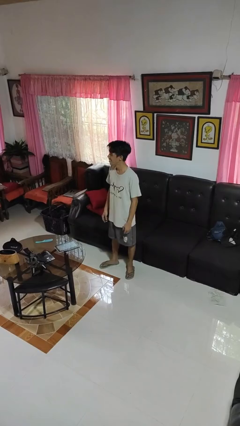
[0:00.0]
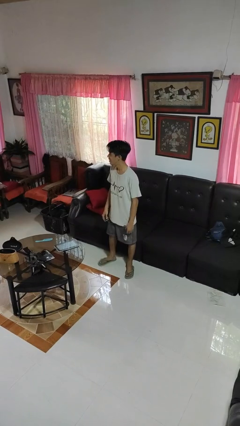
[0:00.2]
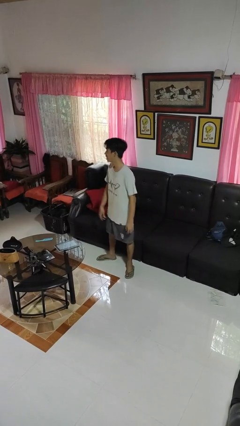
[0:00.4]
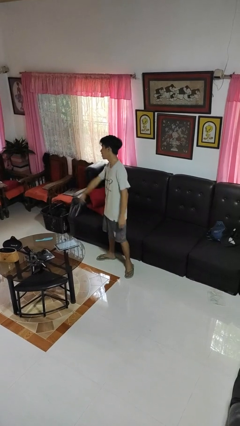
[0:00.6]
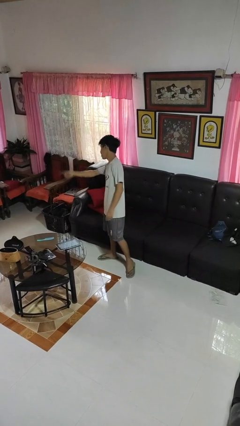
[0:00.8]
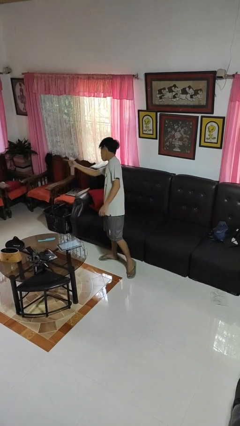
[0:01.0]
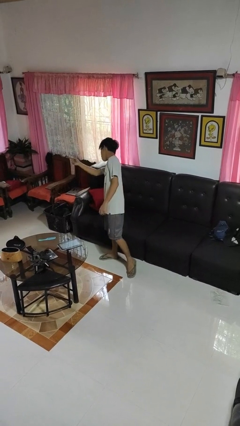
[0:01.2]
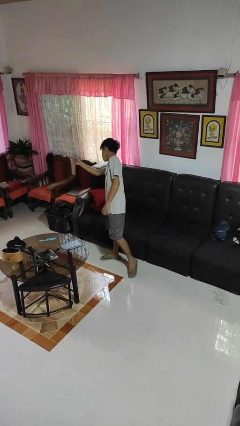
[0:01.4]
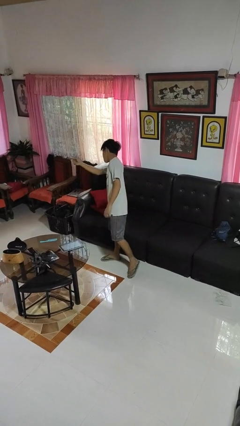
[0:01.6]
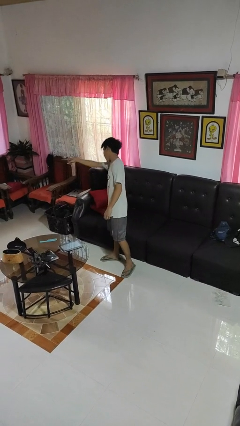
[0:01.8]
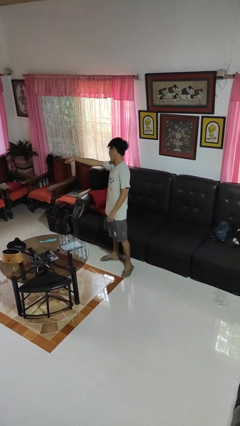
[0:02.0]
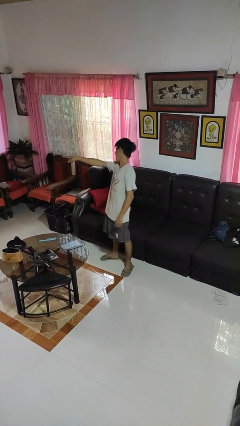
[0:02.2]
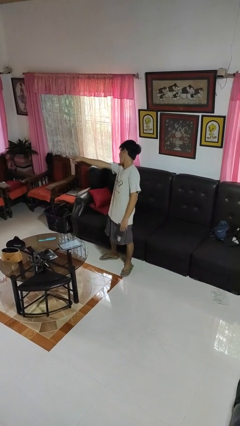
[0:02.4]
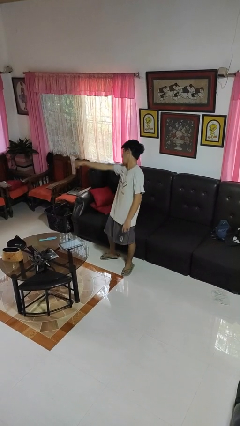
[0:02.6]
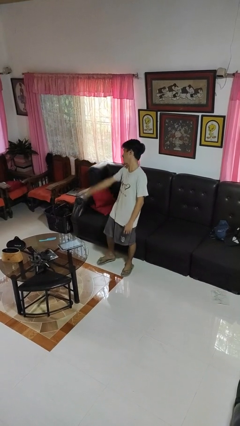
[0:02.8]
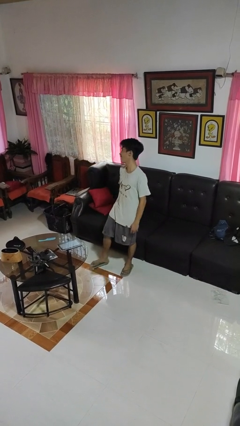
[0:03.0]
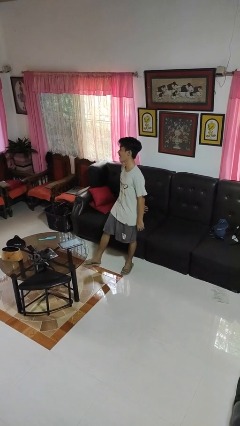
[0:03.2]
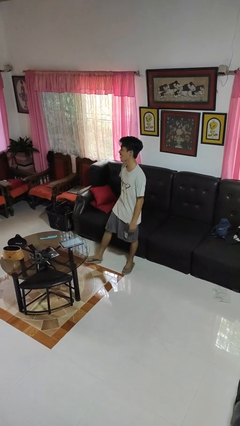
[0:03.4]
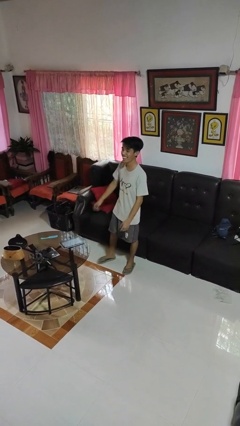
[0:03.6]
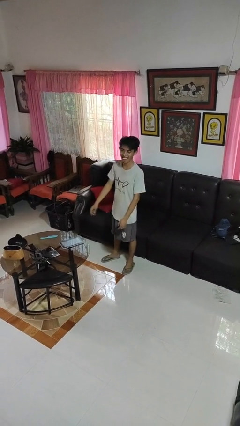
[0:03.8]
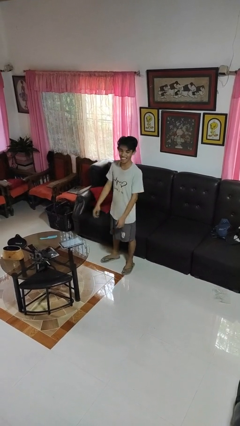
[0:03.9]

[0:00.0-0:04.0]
person points at person

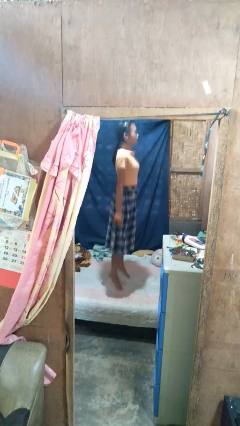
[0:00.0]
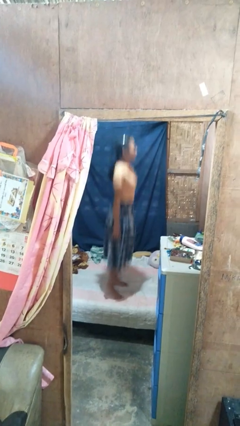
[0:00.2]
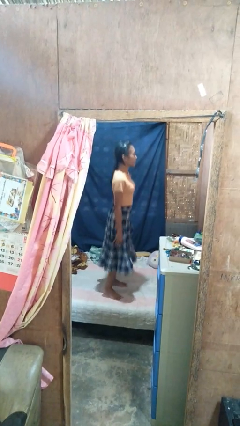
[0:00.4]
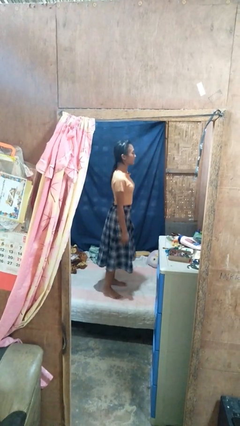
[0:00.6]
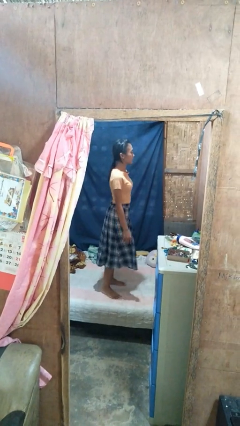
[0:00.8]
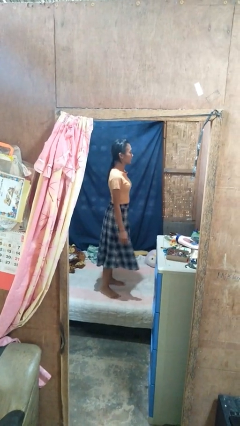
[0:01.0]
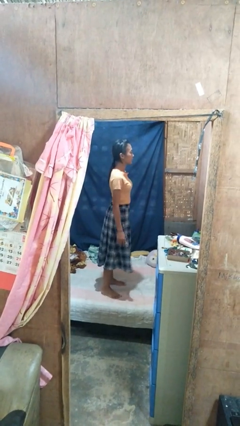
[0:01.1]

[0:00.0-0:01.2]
person jumps on bed

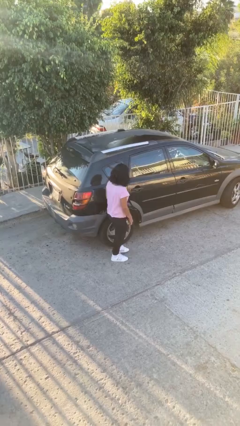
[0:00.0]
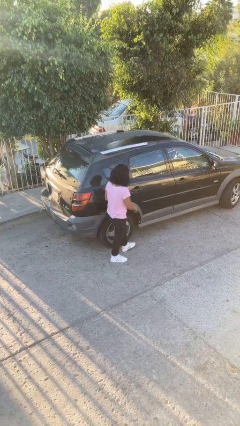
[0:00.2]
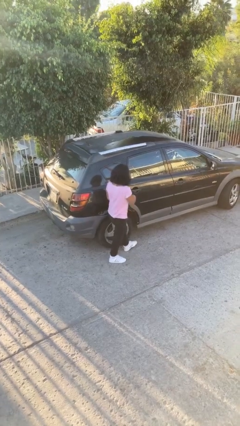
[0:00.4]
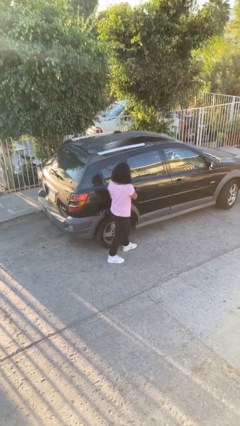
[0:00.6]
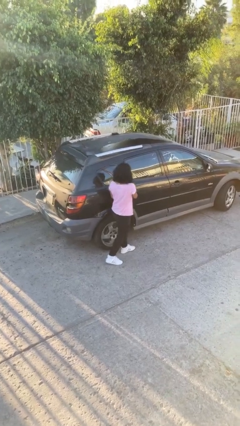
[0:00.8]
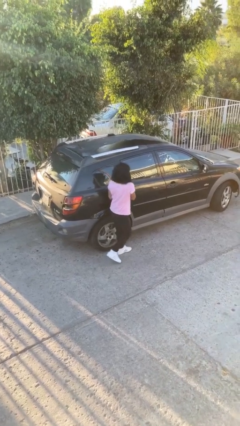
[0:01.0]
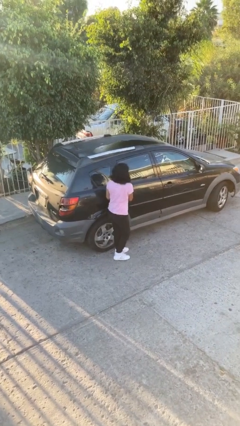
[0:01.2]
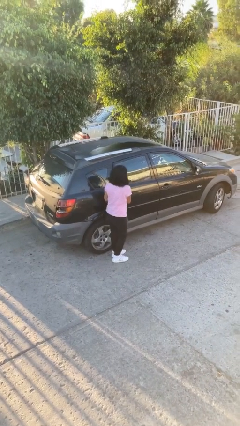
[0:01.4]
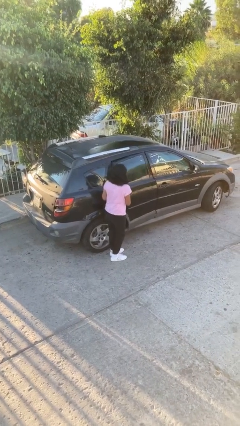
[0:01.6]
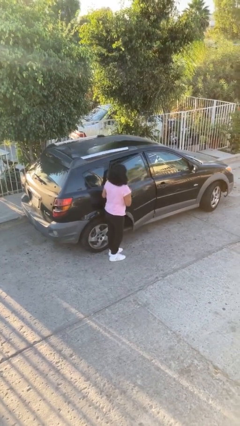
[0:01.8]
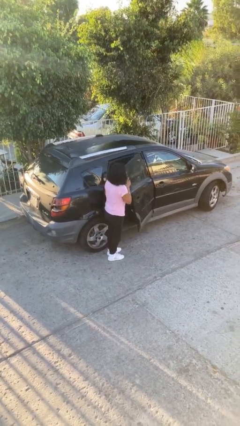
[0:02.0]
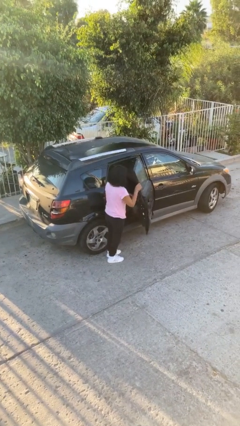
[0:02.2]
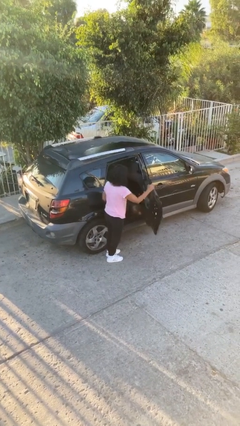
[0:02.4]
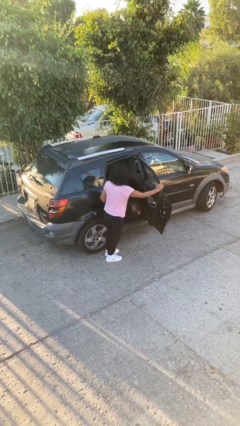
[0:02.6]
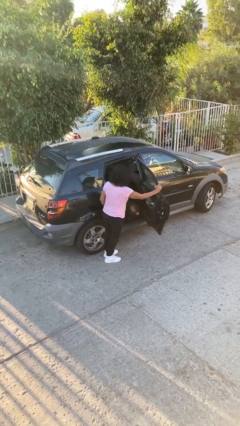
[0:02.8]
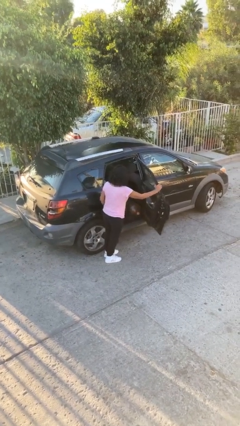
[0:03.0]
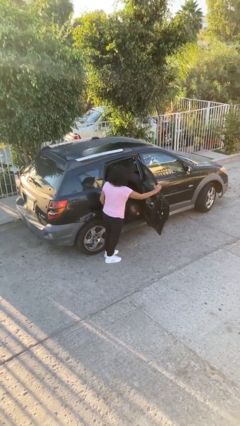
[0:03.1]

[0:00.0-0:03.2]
person opens car door

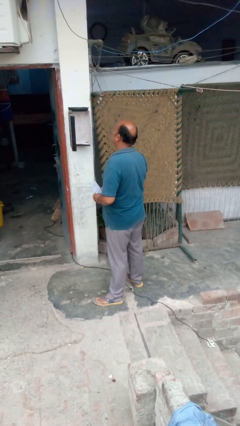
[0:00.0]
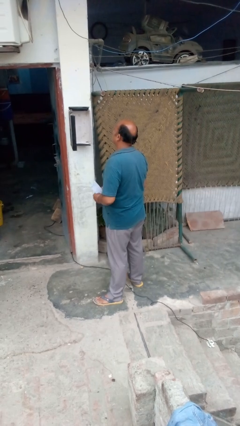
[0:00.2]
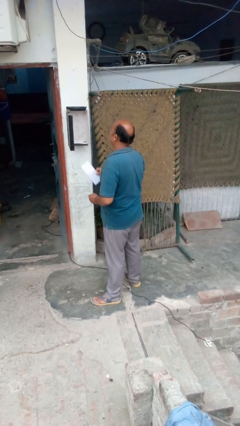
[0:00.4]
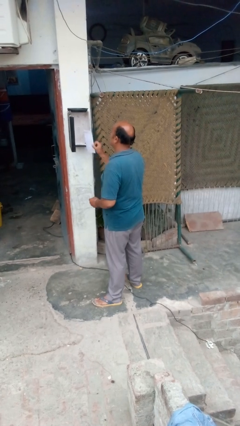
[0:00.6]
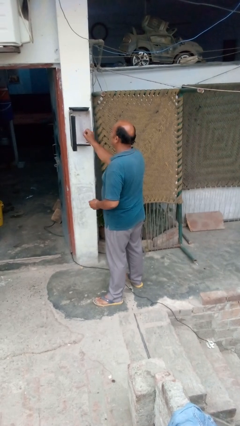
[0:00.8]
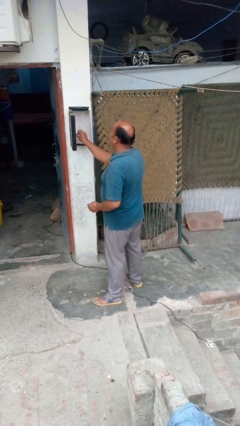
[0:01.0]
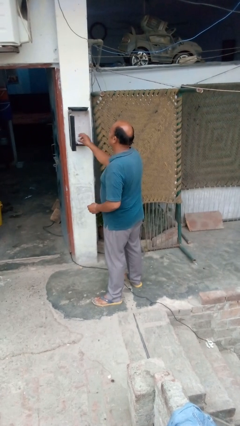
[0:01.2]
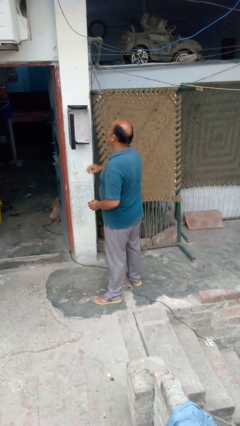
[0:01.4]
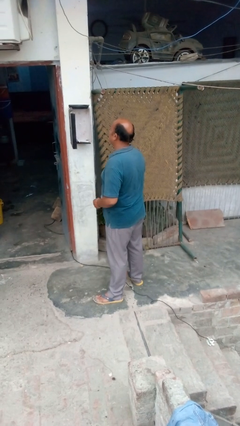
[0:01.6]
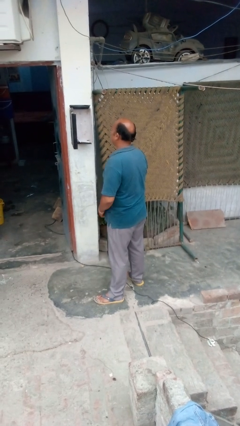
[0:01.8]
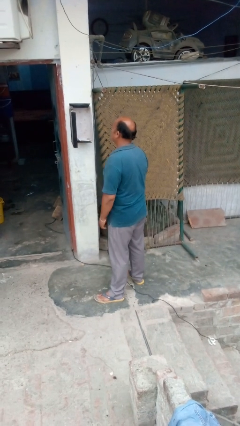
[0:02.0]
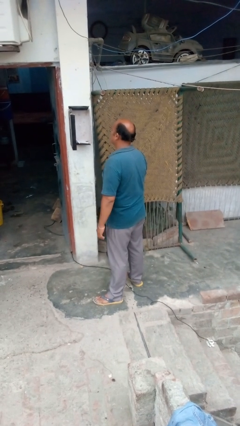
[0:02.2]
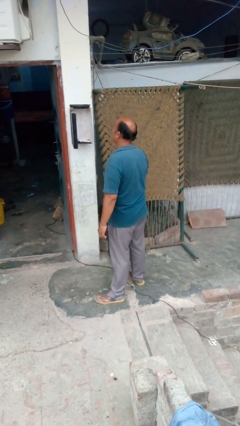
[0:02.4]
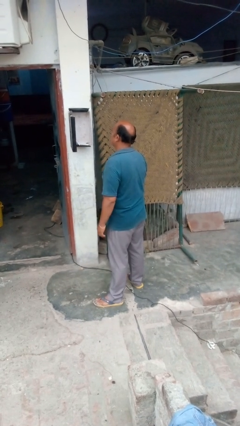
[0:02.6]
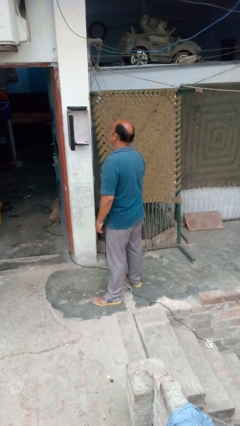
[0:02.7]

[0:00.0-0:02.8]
person puts letters in mailbox

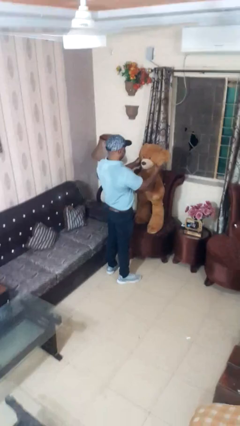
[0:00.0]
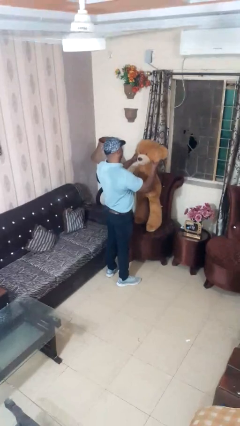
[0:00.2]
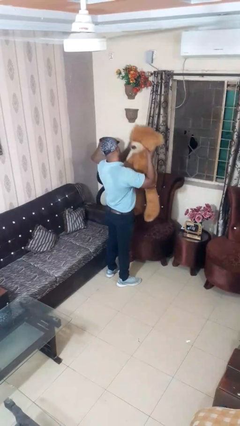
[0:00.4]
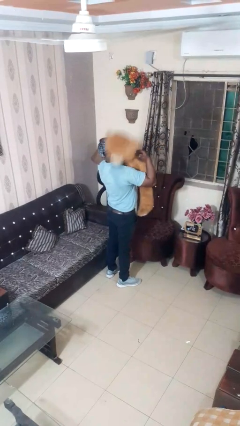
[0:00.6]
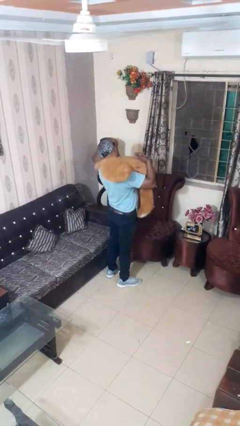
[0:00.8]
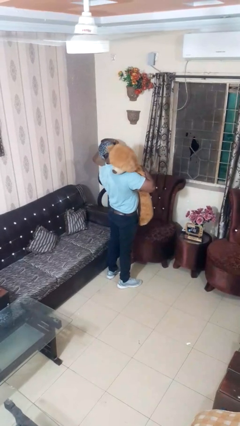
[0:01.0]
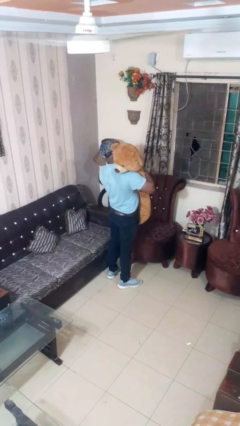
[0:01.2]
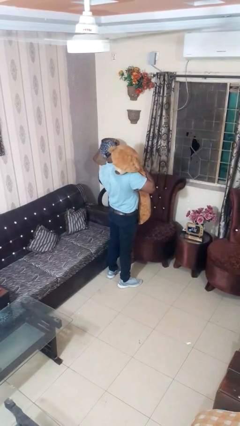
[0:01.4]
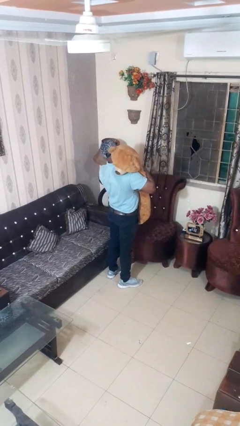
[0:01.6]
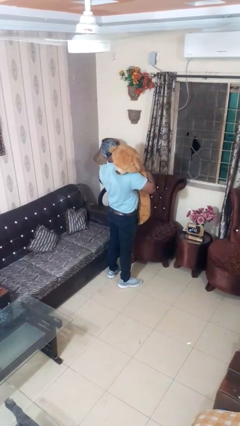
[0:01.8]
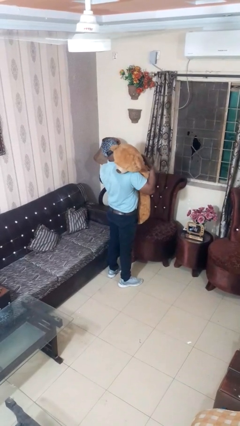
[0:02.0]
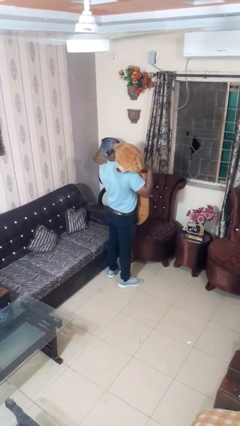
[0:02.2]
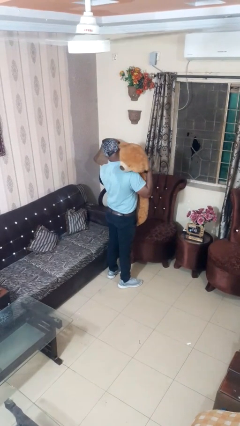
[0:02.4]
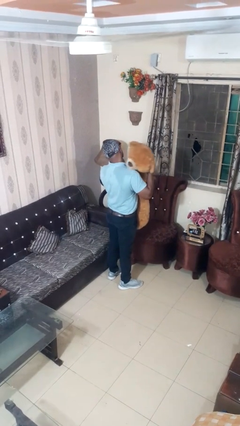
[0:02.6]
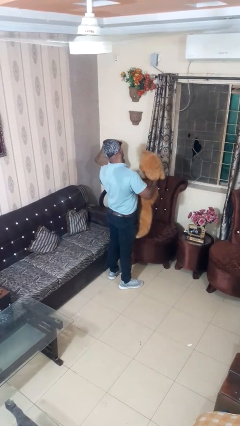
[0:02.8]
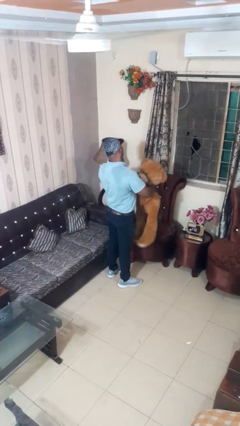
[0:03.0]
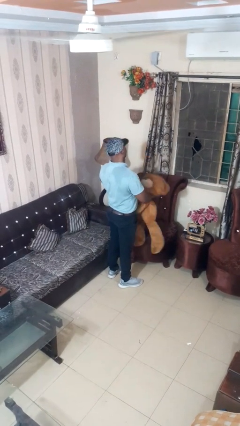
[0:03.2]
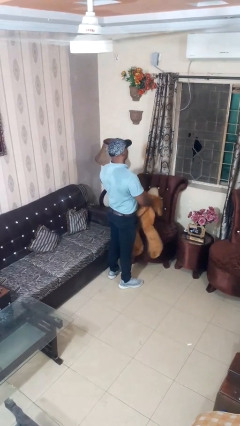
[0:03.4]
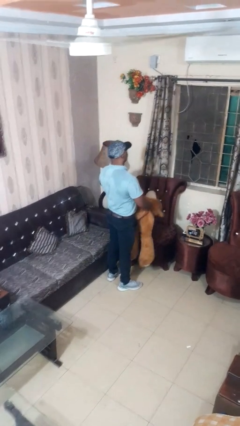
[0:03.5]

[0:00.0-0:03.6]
person hugs stuffed animal

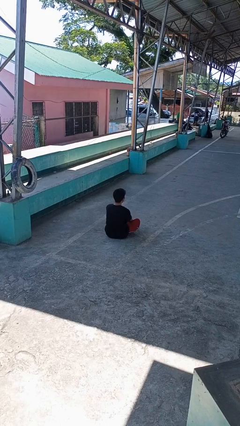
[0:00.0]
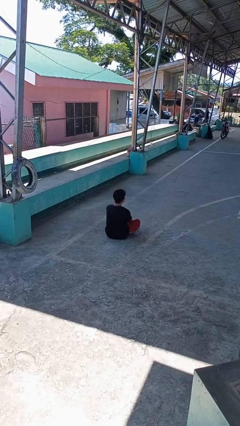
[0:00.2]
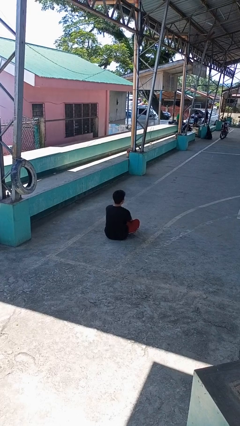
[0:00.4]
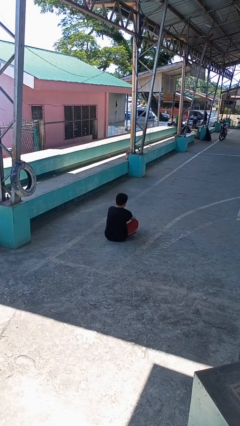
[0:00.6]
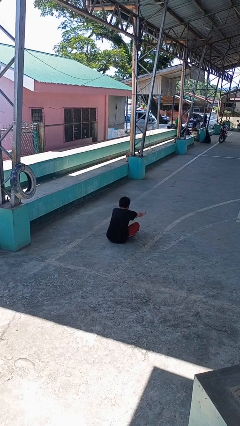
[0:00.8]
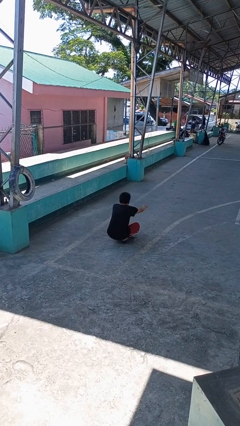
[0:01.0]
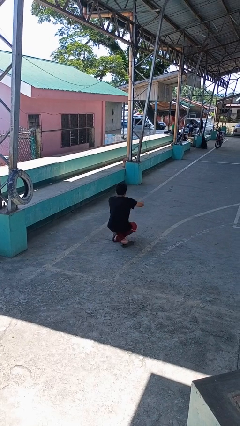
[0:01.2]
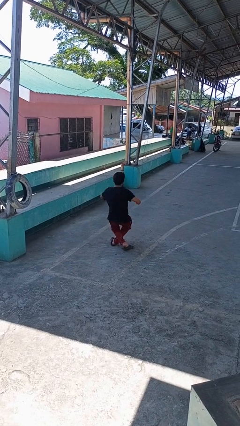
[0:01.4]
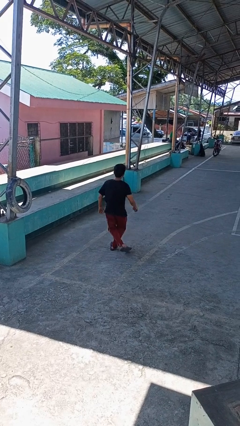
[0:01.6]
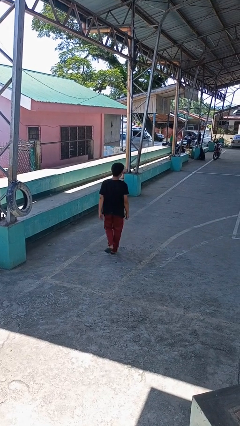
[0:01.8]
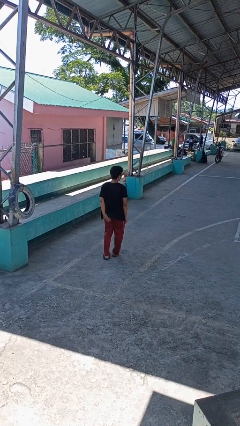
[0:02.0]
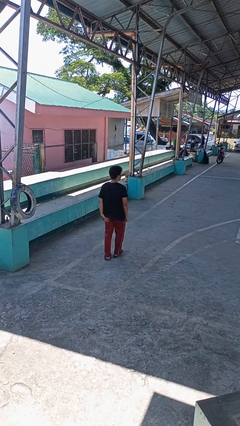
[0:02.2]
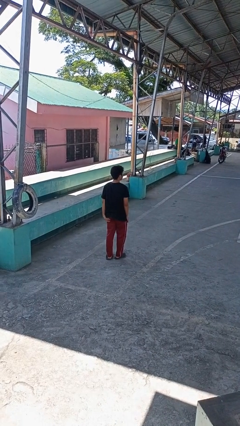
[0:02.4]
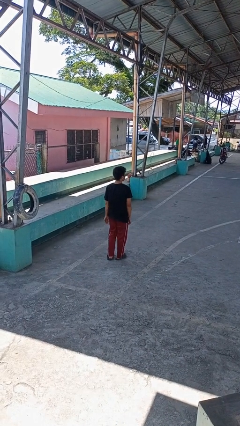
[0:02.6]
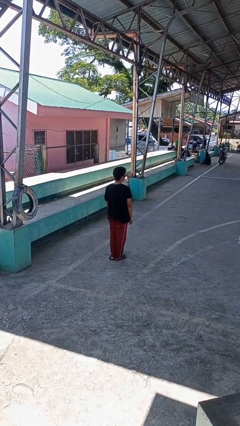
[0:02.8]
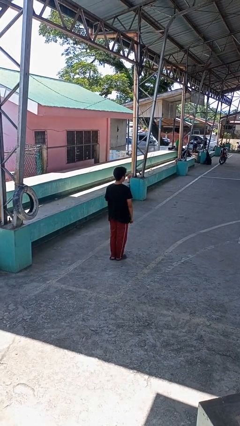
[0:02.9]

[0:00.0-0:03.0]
person stands up from floor
